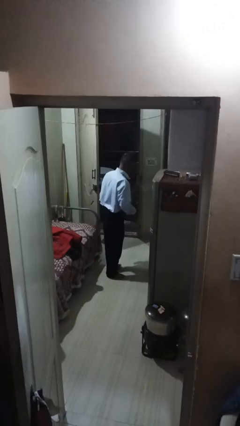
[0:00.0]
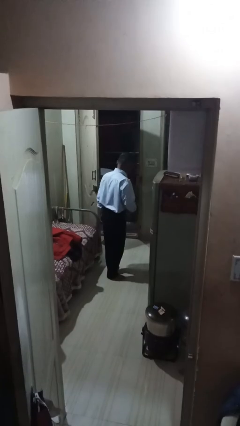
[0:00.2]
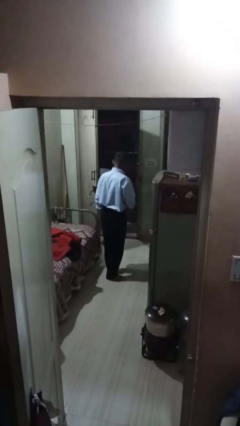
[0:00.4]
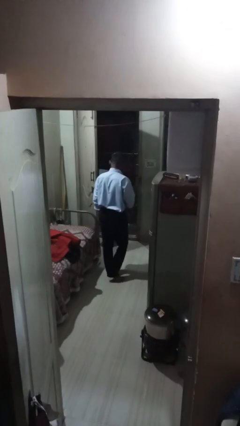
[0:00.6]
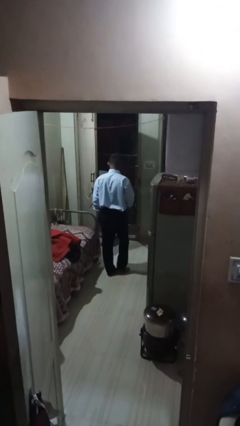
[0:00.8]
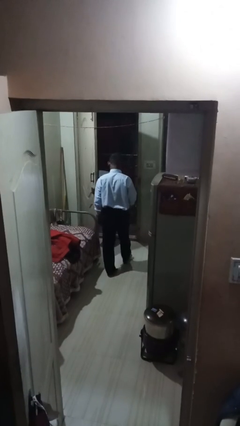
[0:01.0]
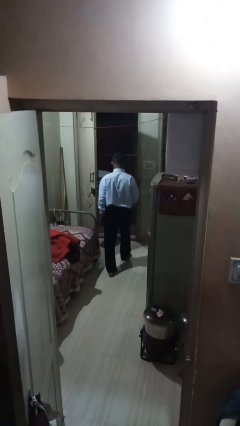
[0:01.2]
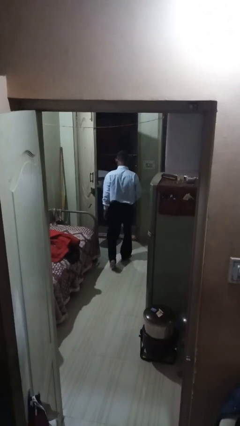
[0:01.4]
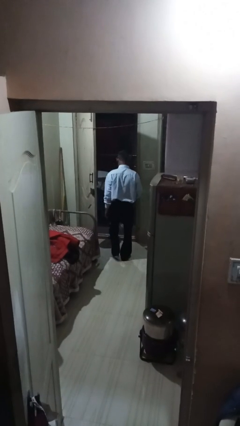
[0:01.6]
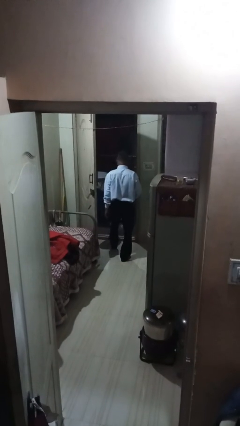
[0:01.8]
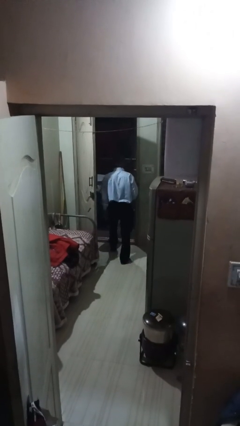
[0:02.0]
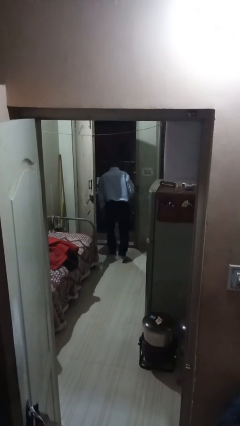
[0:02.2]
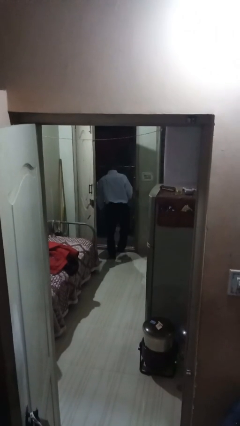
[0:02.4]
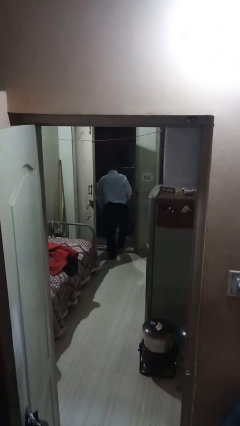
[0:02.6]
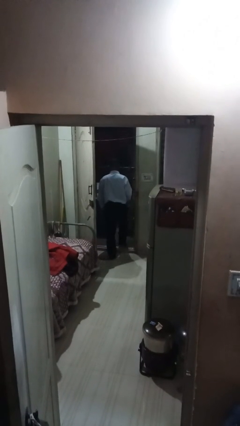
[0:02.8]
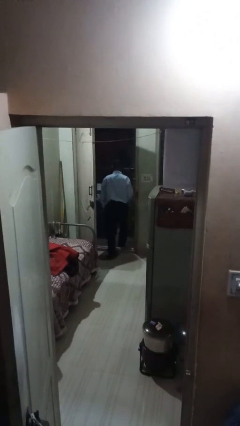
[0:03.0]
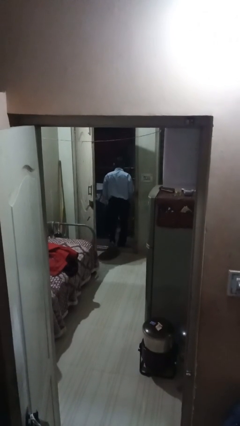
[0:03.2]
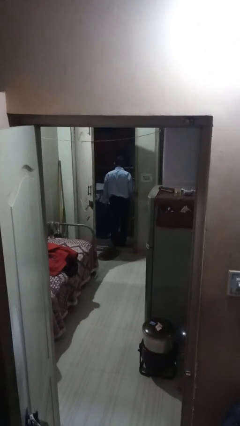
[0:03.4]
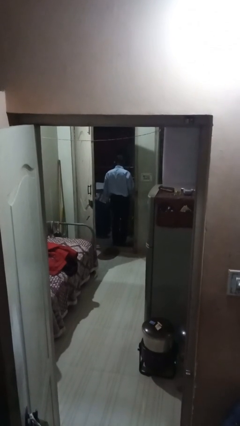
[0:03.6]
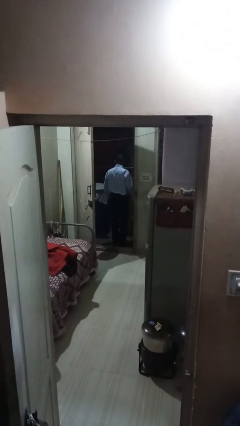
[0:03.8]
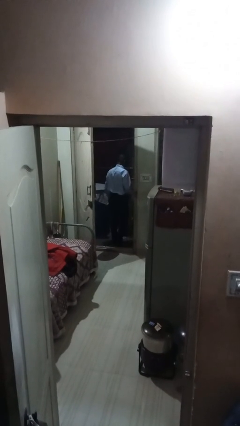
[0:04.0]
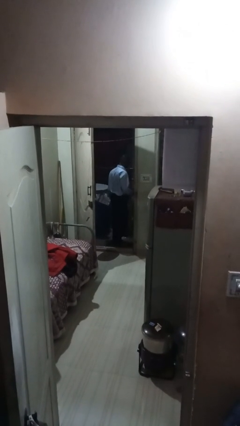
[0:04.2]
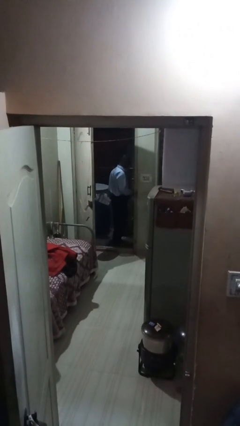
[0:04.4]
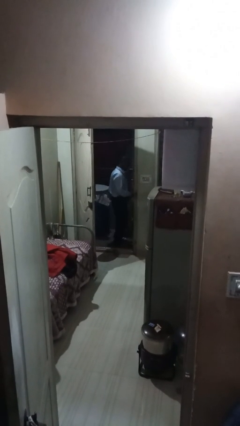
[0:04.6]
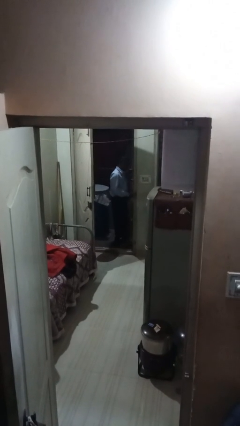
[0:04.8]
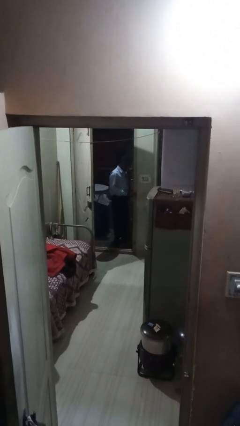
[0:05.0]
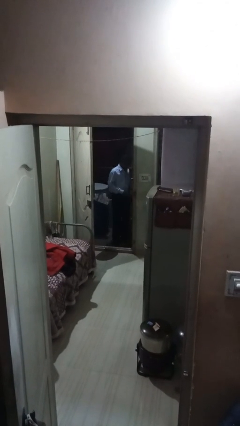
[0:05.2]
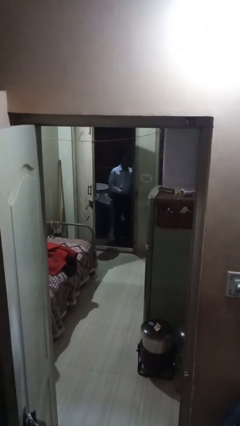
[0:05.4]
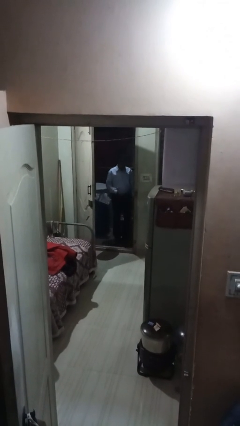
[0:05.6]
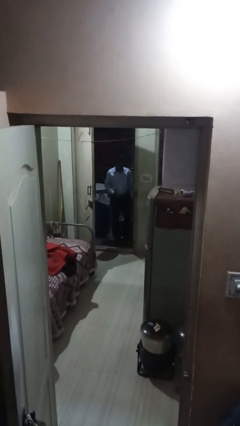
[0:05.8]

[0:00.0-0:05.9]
person exits scene through structure

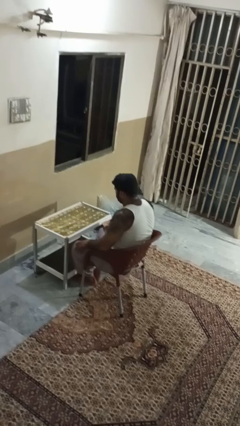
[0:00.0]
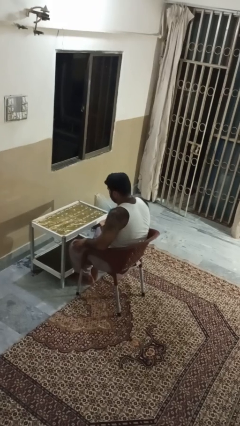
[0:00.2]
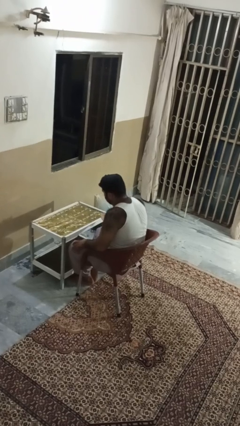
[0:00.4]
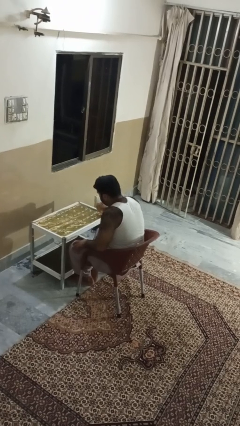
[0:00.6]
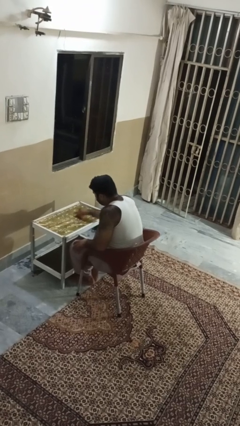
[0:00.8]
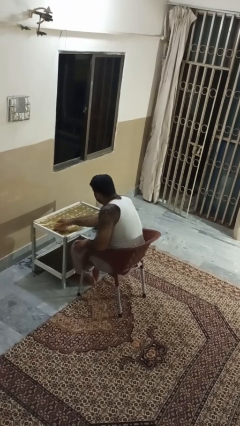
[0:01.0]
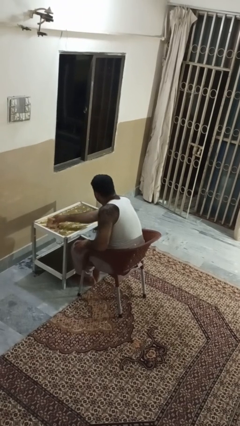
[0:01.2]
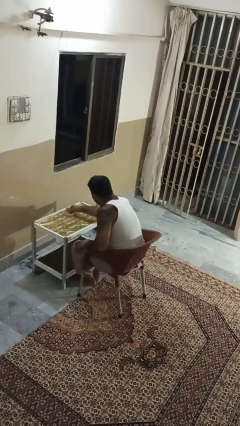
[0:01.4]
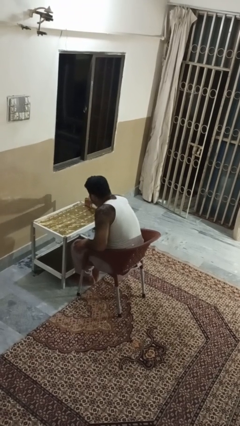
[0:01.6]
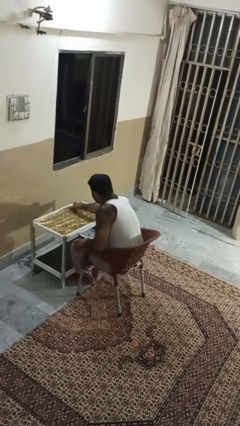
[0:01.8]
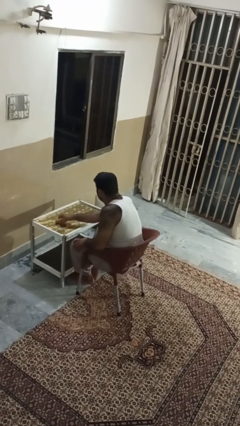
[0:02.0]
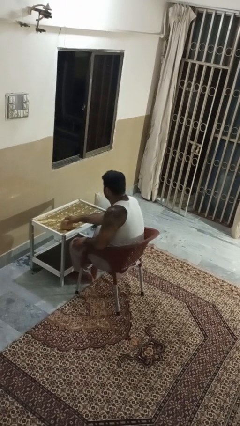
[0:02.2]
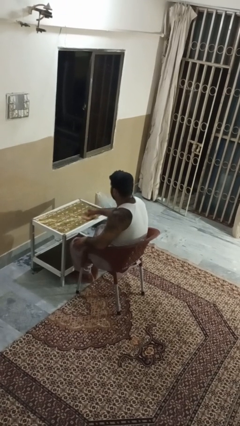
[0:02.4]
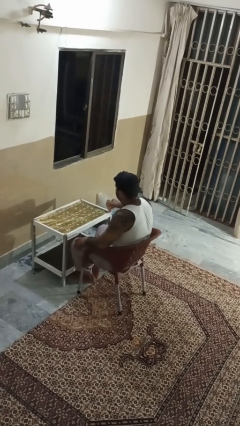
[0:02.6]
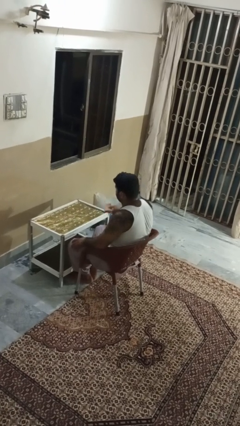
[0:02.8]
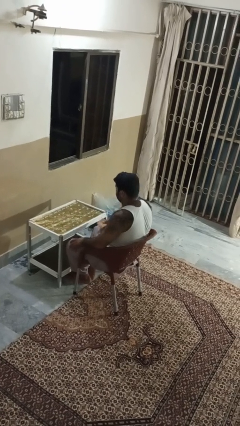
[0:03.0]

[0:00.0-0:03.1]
person cleans table with rag

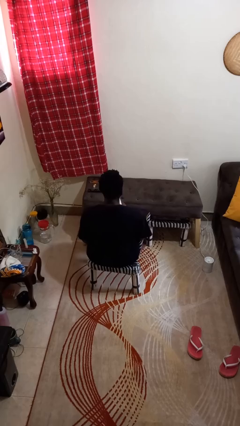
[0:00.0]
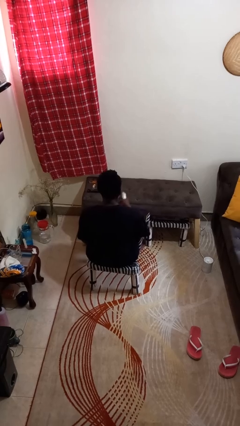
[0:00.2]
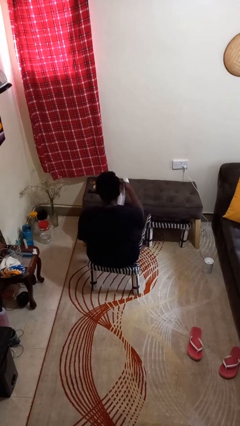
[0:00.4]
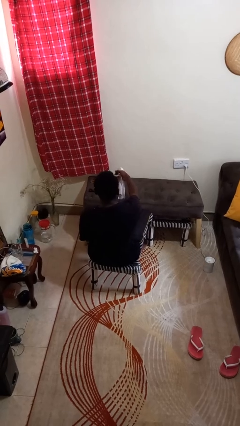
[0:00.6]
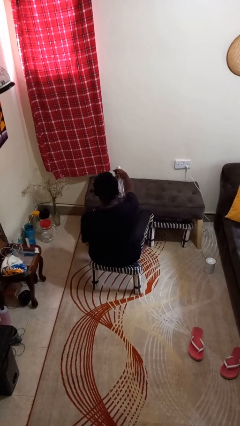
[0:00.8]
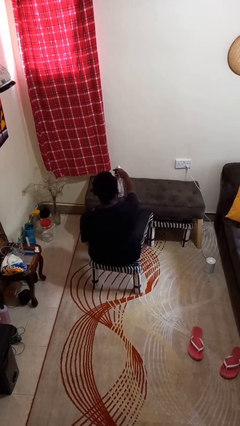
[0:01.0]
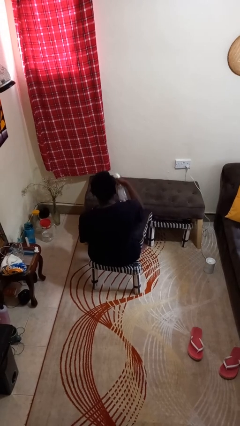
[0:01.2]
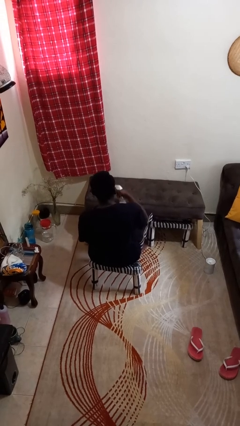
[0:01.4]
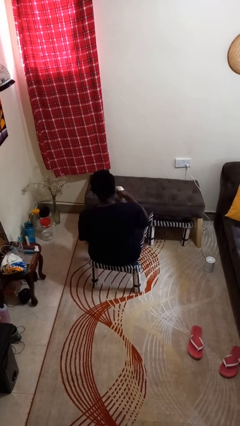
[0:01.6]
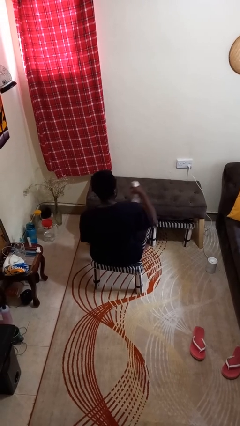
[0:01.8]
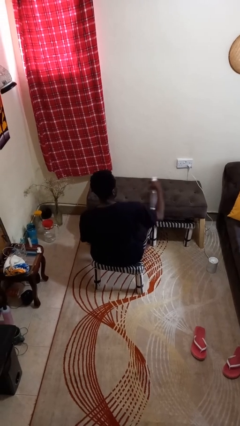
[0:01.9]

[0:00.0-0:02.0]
person sprays from bottle

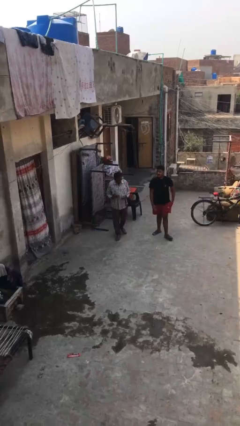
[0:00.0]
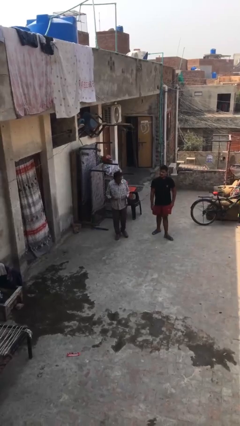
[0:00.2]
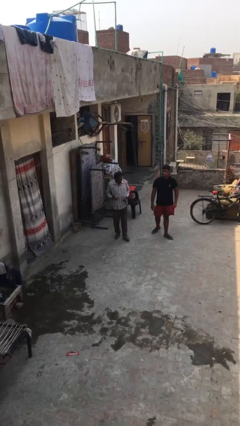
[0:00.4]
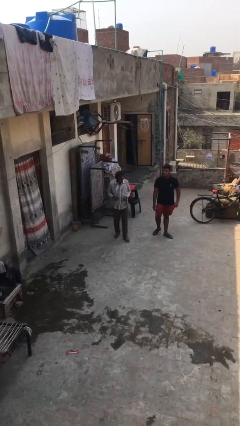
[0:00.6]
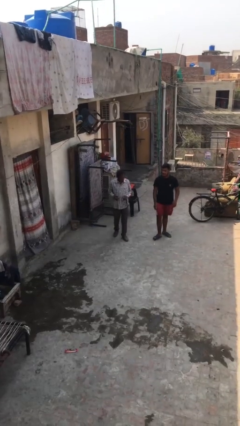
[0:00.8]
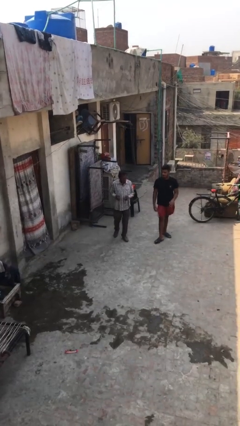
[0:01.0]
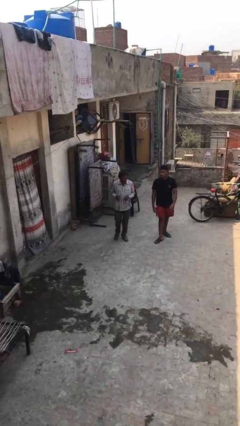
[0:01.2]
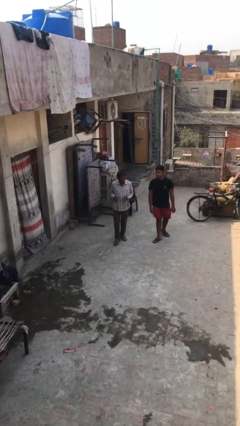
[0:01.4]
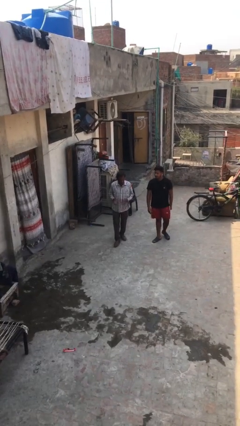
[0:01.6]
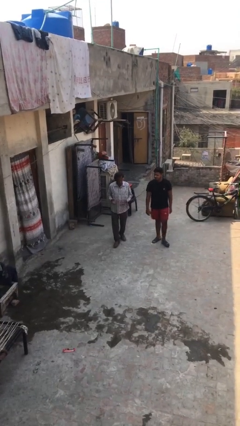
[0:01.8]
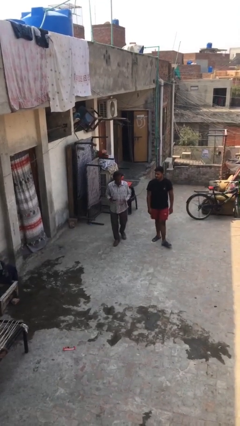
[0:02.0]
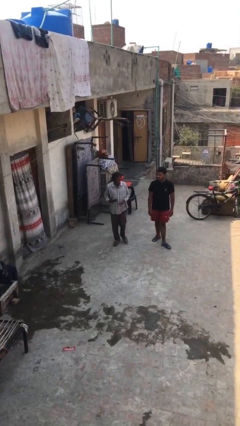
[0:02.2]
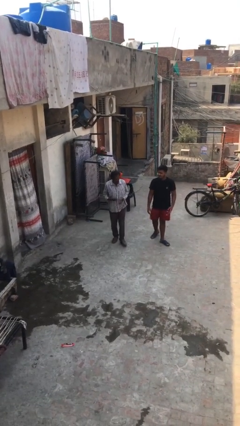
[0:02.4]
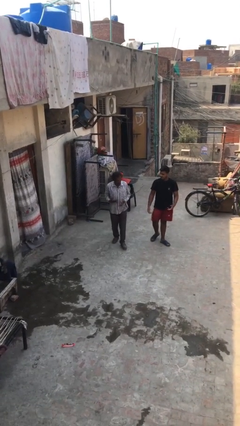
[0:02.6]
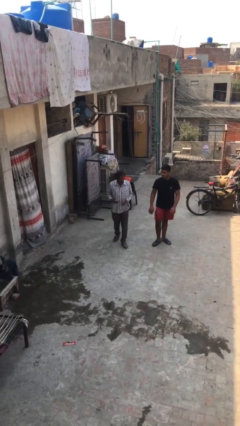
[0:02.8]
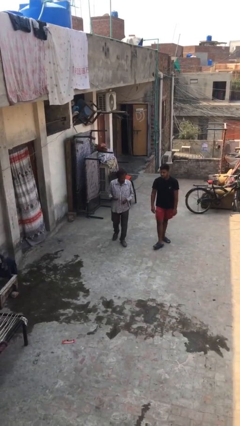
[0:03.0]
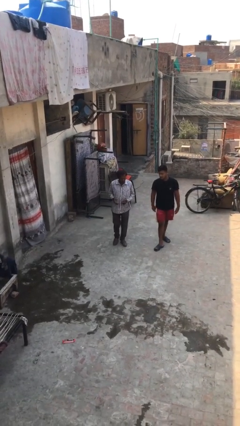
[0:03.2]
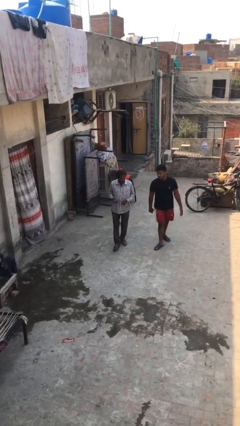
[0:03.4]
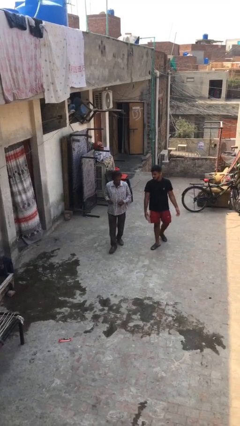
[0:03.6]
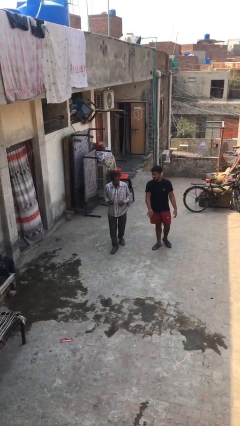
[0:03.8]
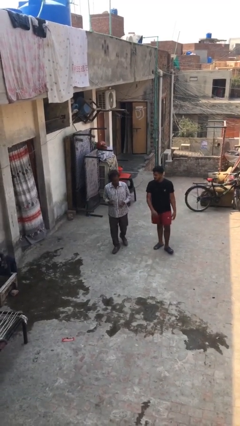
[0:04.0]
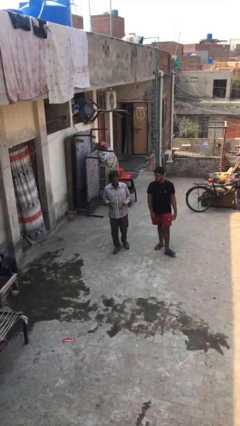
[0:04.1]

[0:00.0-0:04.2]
person talks to person

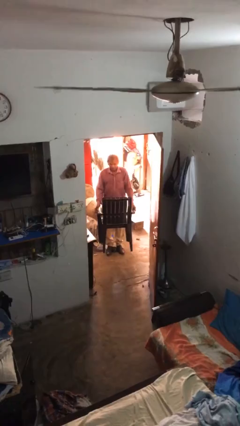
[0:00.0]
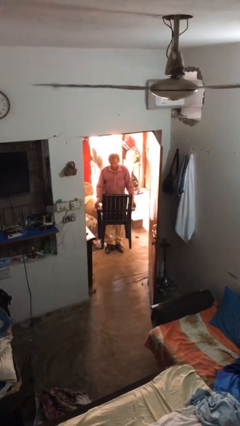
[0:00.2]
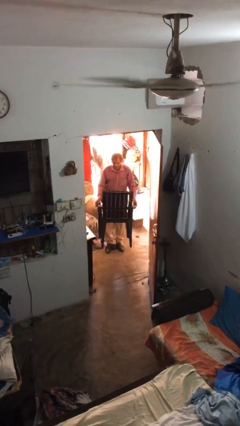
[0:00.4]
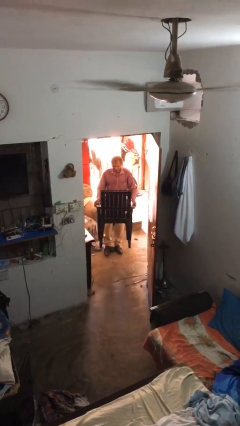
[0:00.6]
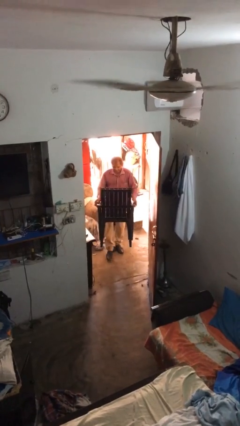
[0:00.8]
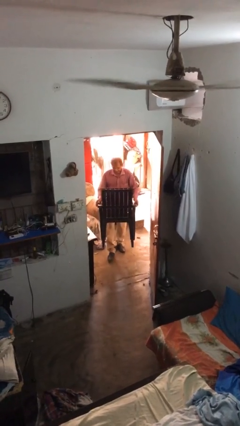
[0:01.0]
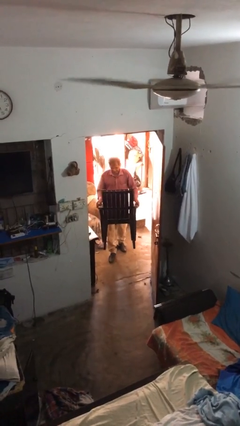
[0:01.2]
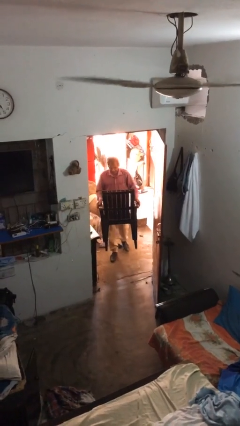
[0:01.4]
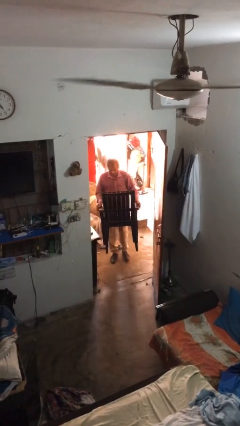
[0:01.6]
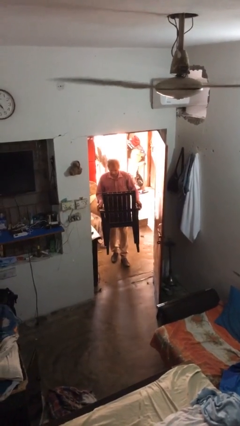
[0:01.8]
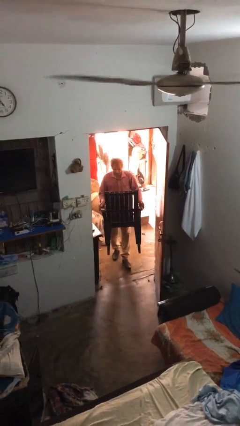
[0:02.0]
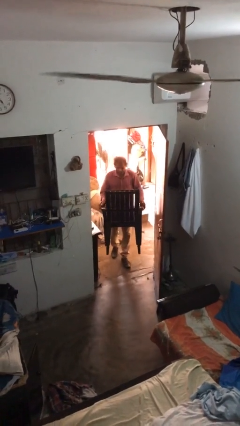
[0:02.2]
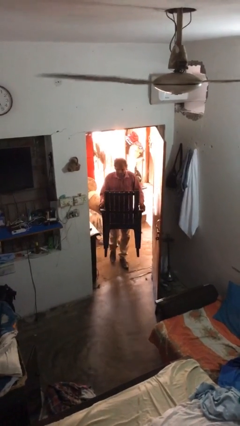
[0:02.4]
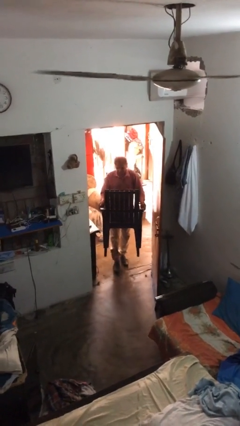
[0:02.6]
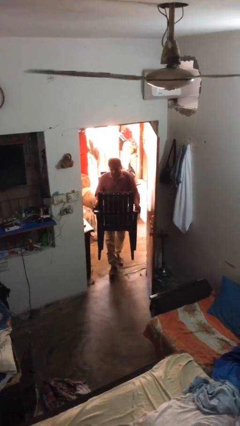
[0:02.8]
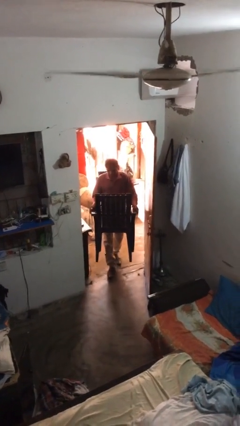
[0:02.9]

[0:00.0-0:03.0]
person carries heavy object
